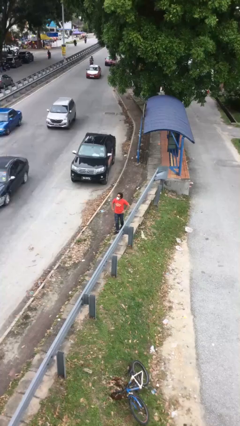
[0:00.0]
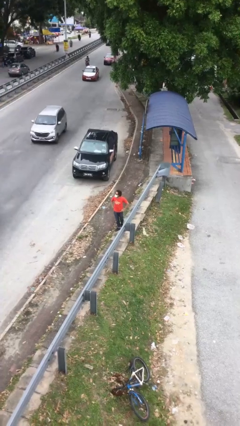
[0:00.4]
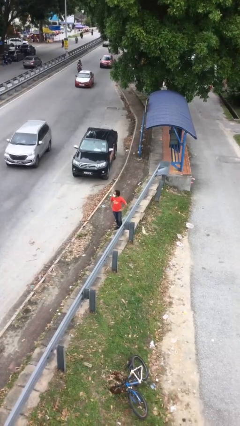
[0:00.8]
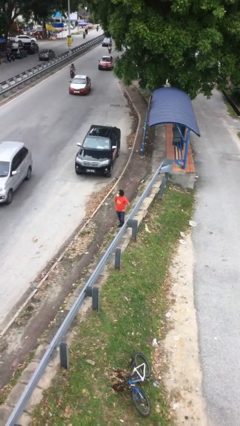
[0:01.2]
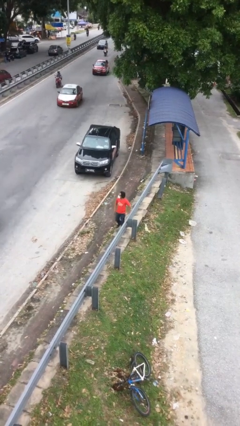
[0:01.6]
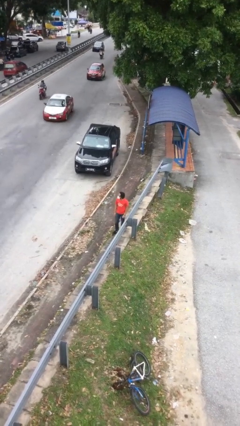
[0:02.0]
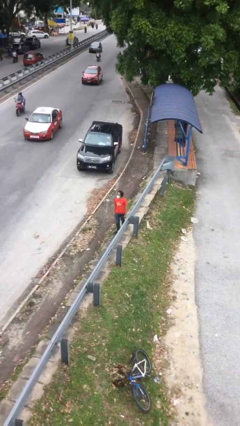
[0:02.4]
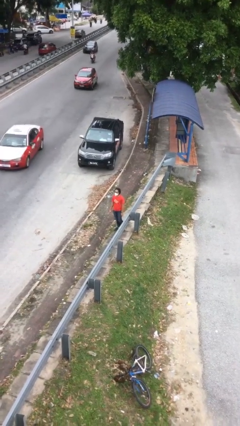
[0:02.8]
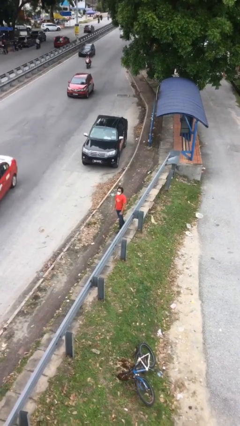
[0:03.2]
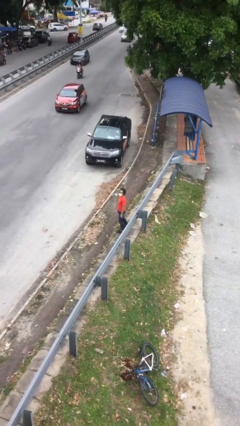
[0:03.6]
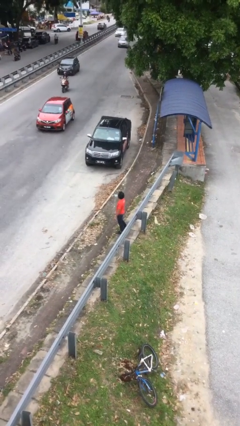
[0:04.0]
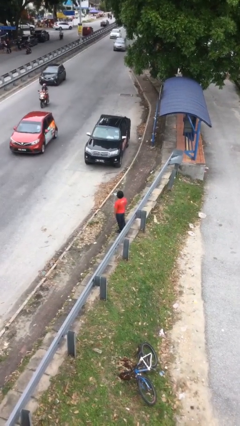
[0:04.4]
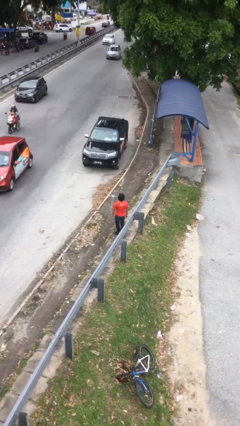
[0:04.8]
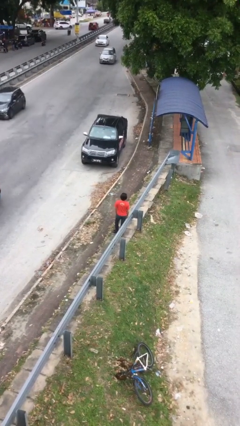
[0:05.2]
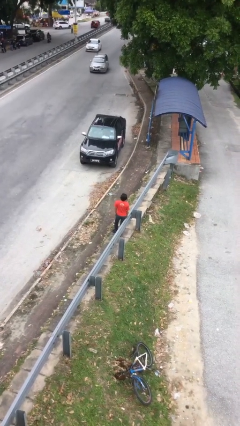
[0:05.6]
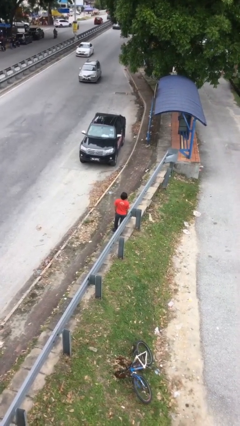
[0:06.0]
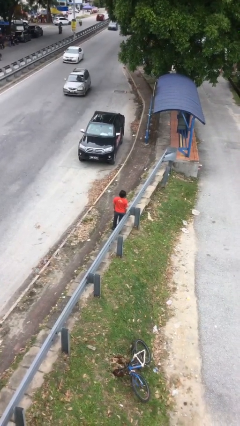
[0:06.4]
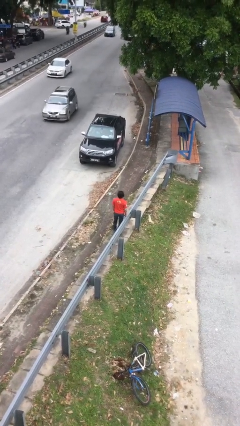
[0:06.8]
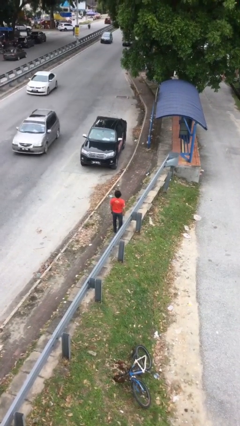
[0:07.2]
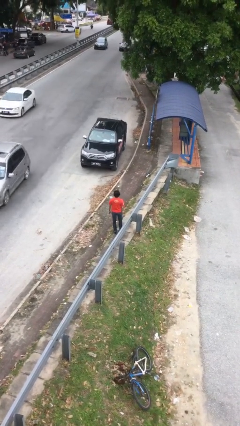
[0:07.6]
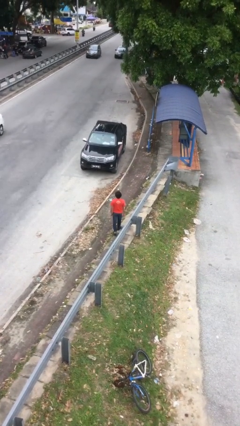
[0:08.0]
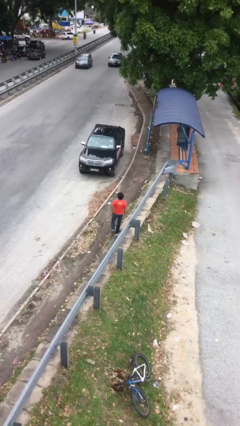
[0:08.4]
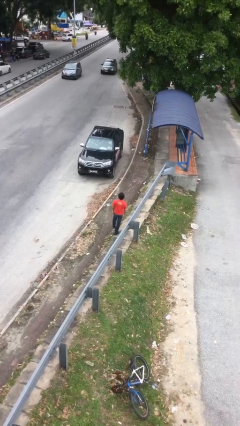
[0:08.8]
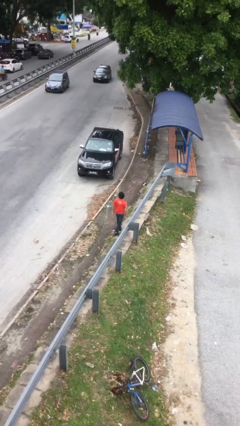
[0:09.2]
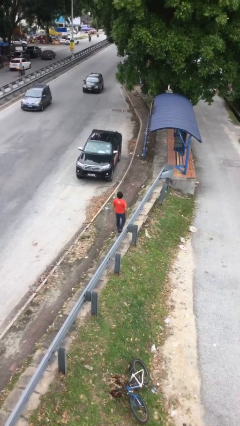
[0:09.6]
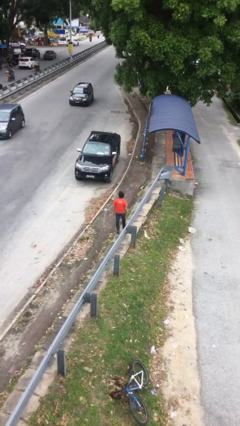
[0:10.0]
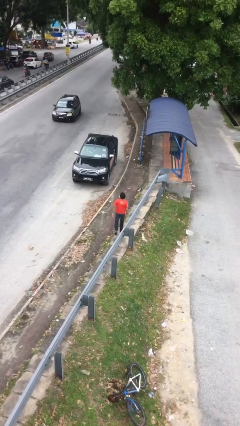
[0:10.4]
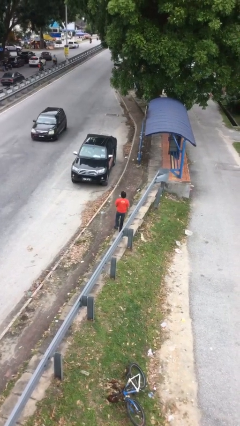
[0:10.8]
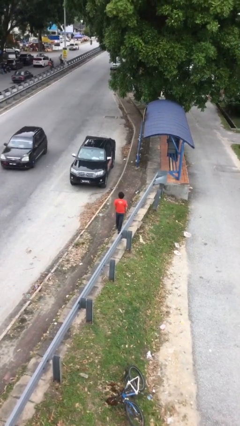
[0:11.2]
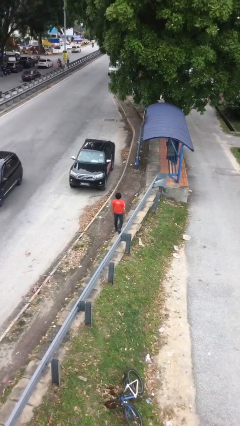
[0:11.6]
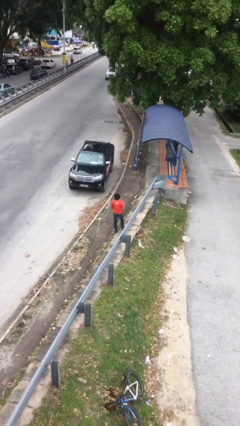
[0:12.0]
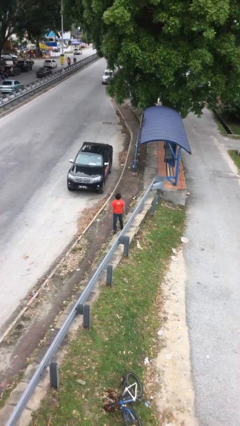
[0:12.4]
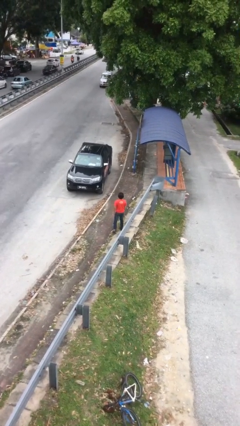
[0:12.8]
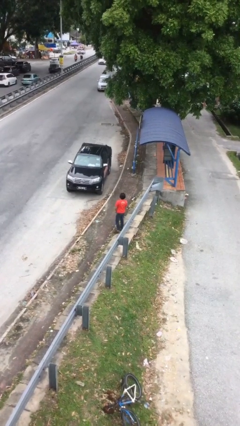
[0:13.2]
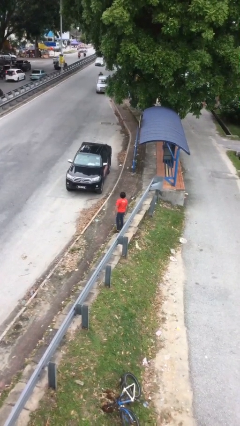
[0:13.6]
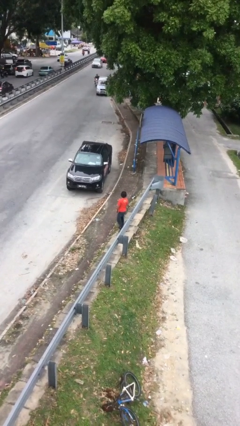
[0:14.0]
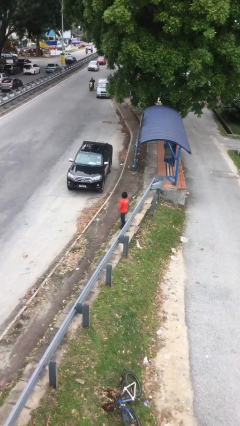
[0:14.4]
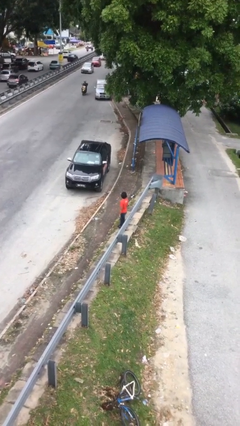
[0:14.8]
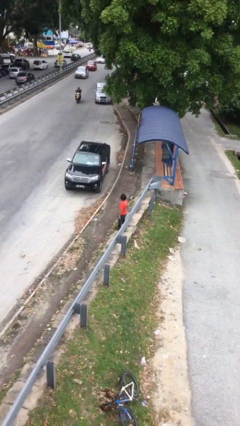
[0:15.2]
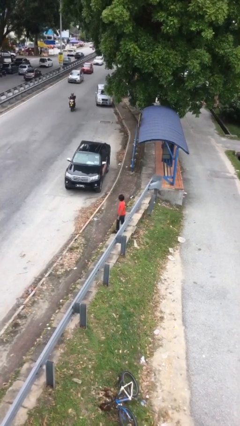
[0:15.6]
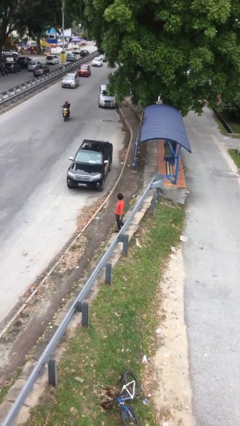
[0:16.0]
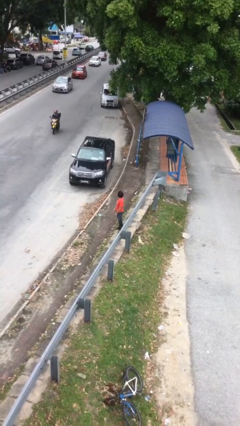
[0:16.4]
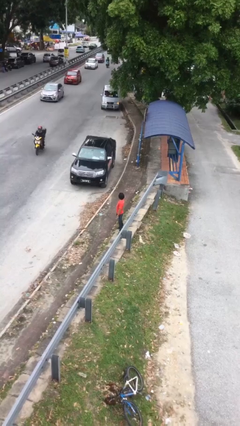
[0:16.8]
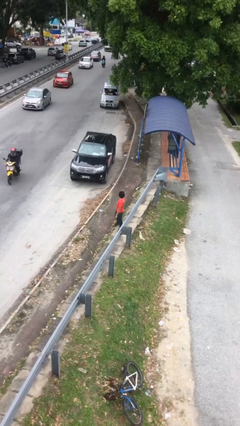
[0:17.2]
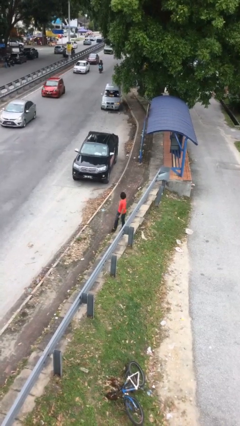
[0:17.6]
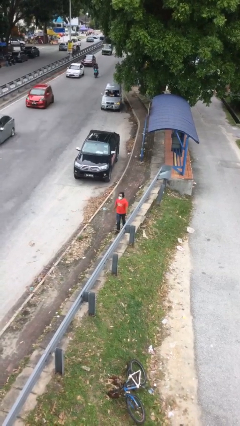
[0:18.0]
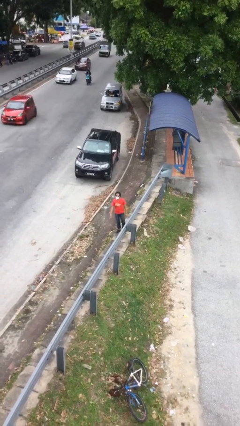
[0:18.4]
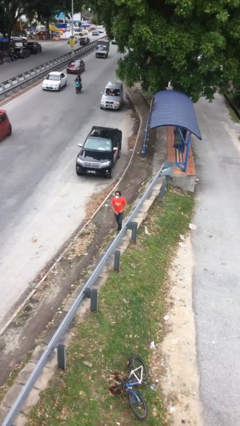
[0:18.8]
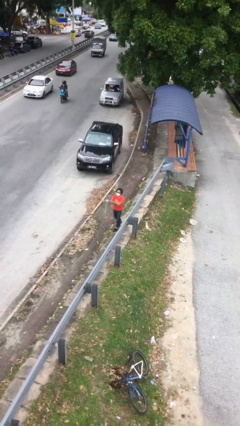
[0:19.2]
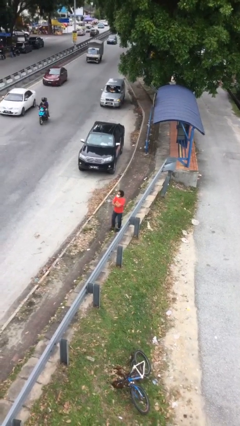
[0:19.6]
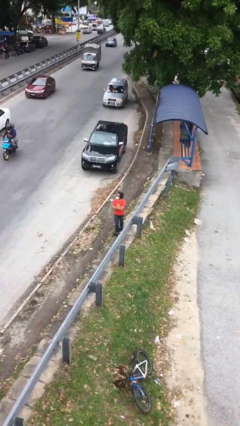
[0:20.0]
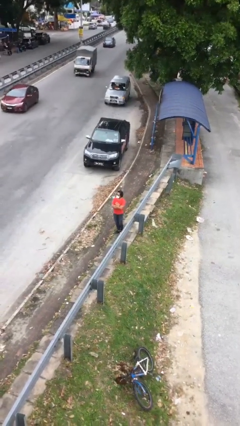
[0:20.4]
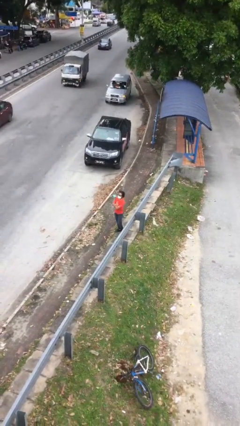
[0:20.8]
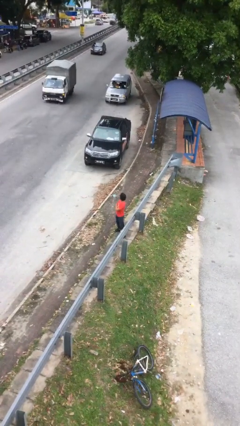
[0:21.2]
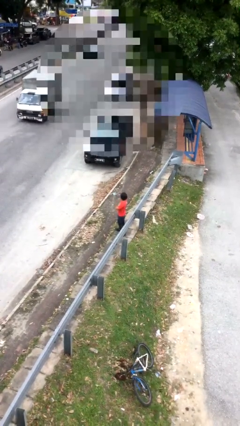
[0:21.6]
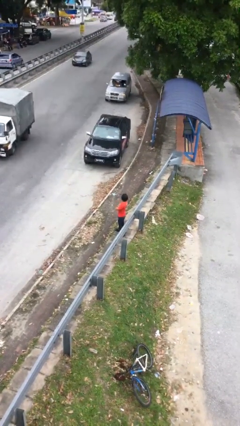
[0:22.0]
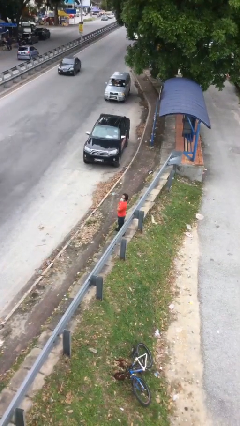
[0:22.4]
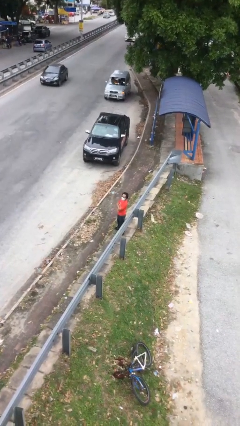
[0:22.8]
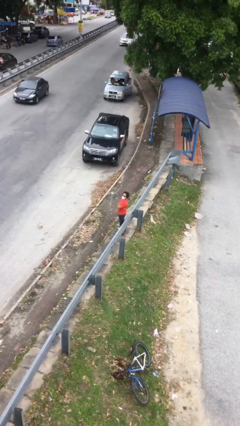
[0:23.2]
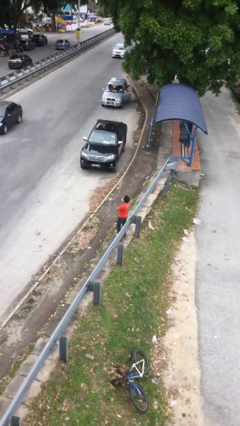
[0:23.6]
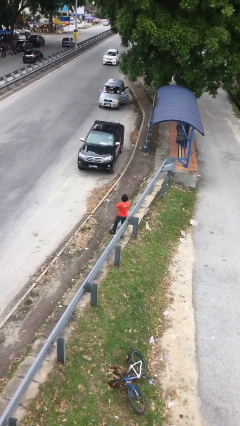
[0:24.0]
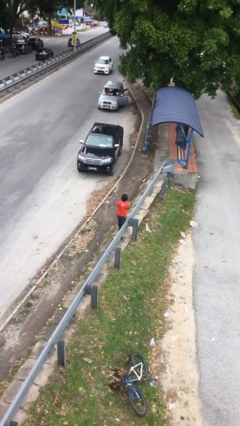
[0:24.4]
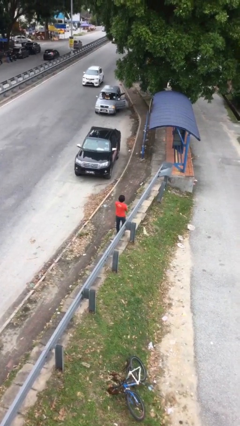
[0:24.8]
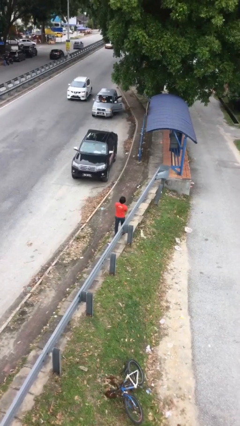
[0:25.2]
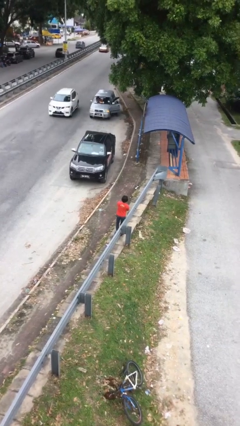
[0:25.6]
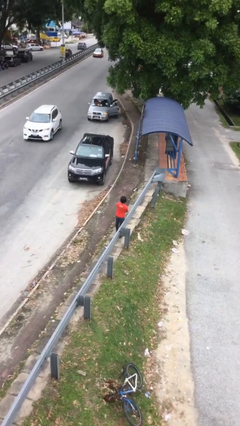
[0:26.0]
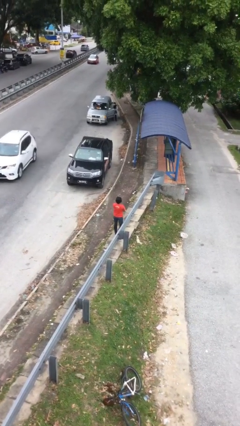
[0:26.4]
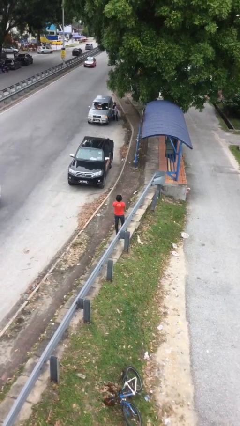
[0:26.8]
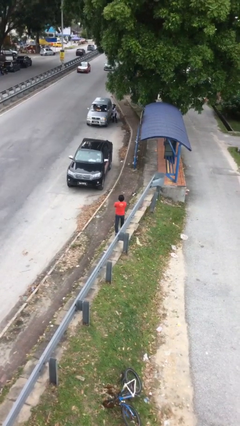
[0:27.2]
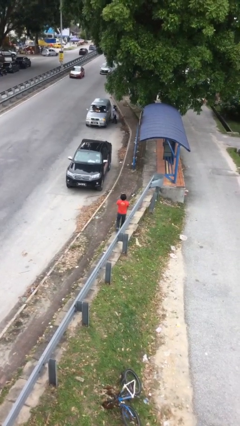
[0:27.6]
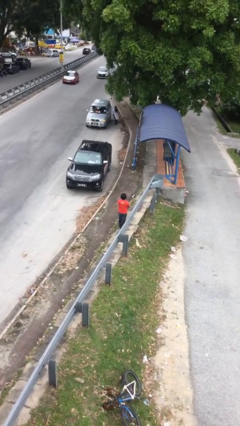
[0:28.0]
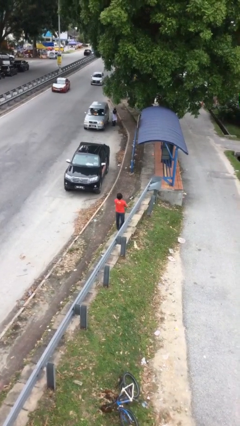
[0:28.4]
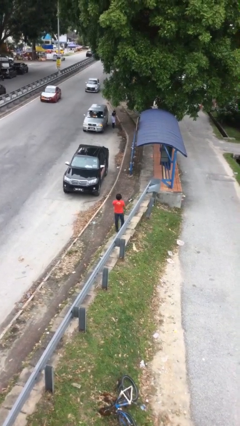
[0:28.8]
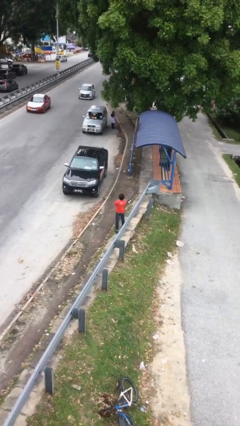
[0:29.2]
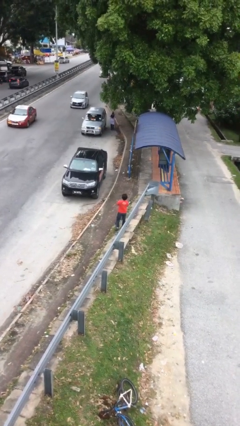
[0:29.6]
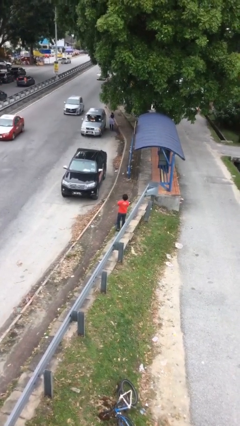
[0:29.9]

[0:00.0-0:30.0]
person walks

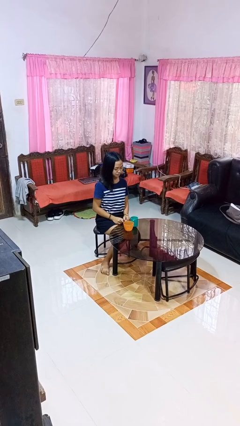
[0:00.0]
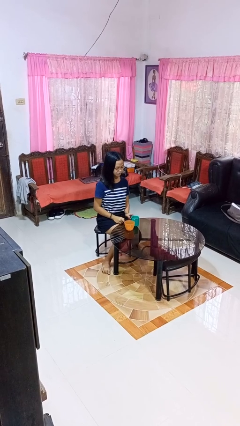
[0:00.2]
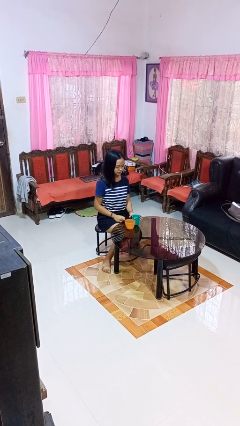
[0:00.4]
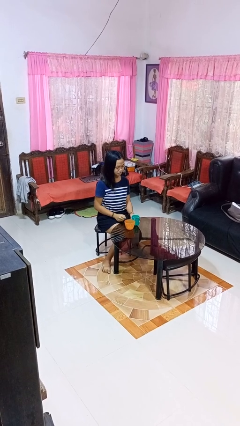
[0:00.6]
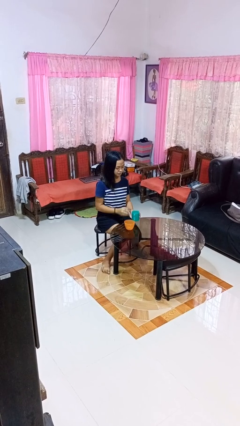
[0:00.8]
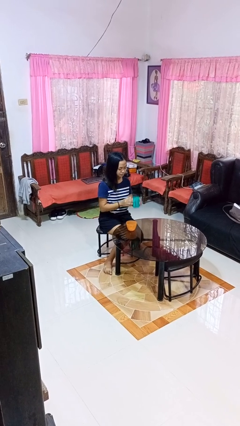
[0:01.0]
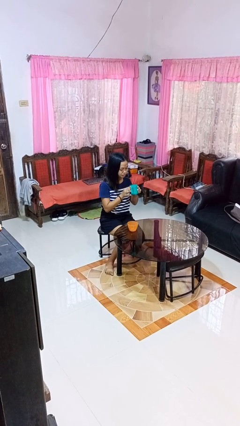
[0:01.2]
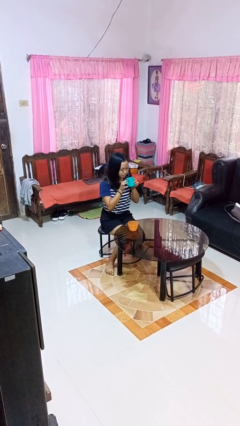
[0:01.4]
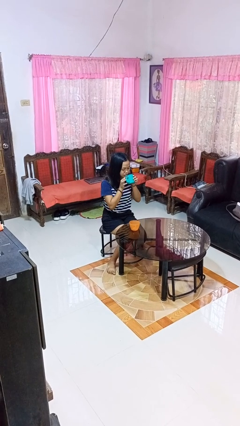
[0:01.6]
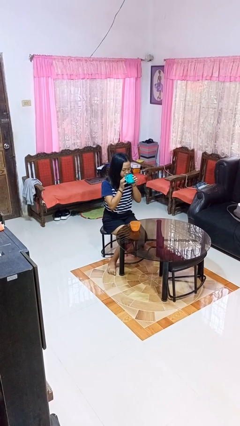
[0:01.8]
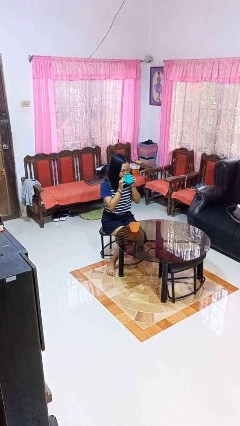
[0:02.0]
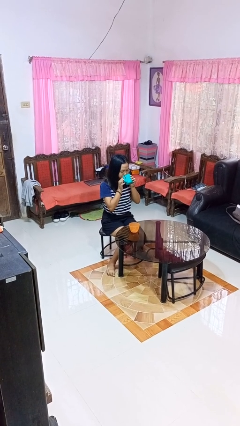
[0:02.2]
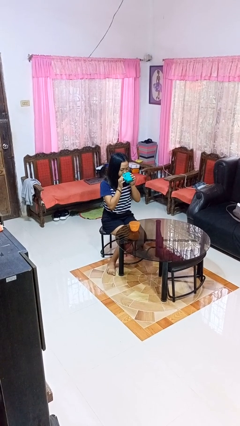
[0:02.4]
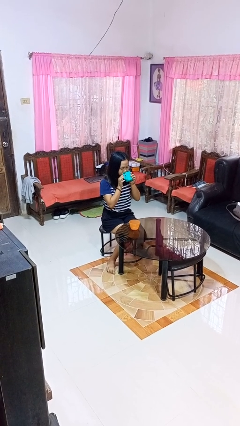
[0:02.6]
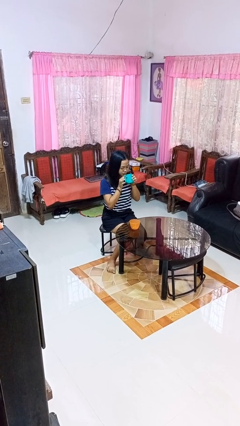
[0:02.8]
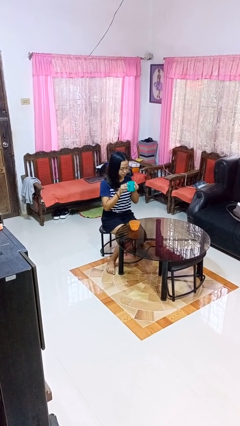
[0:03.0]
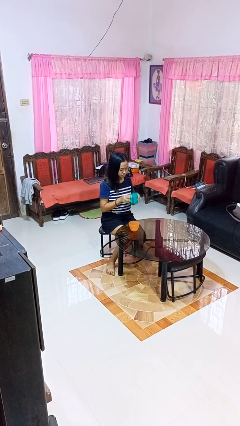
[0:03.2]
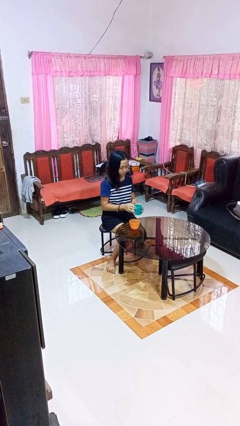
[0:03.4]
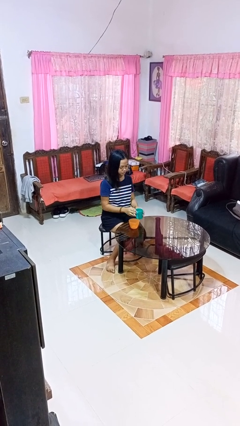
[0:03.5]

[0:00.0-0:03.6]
person drinks from cup
